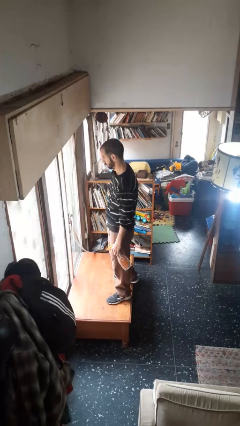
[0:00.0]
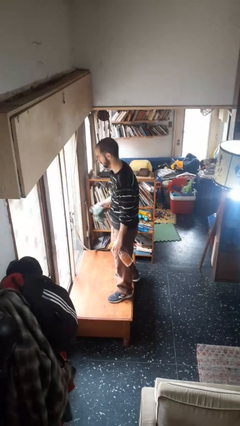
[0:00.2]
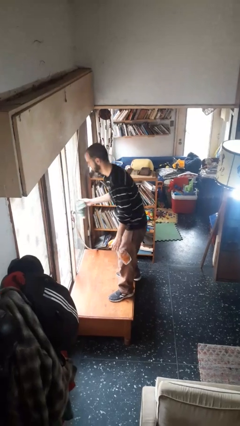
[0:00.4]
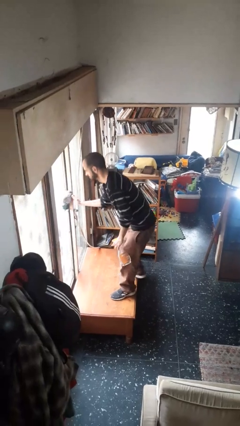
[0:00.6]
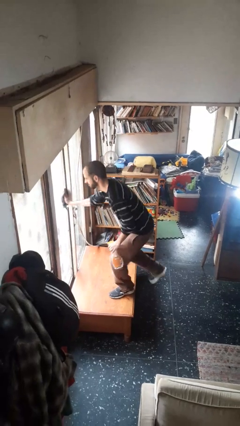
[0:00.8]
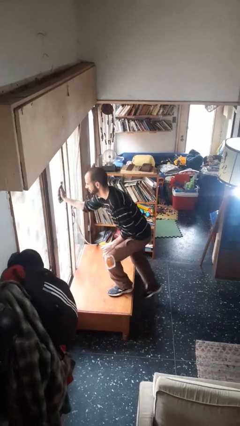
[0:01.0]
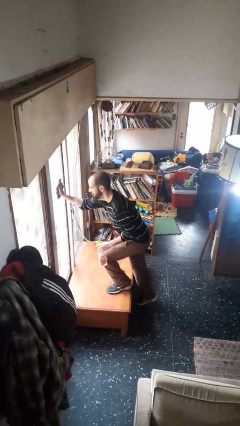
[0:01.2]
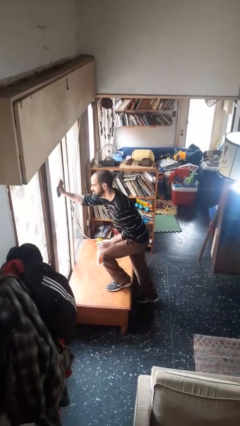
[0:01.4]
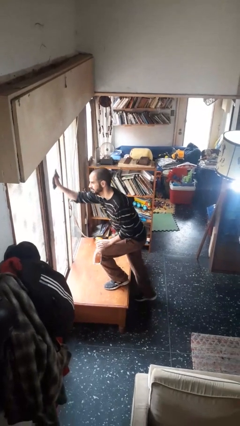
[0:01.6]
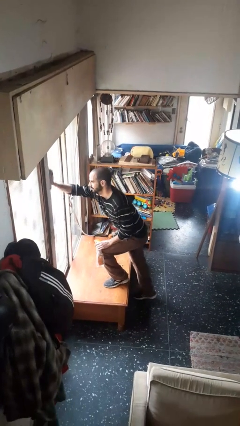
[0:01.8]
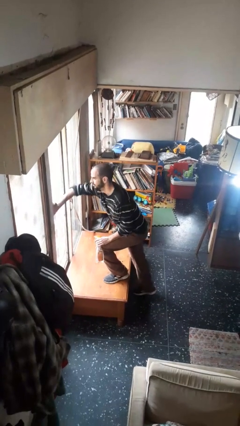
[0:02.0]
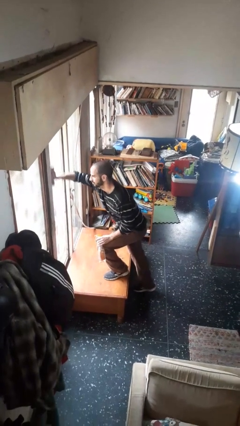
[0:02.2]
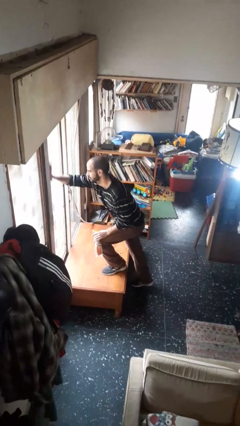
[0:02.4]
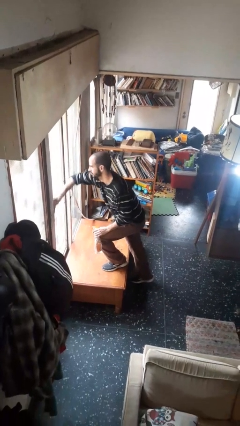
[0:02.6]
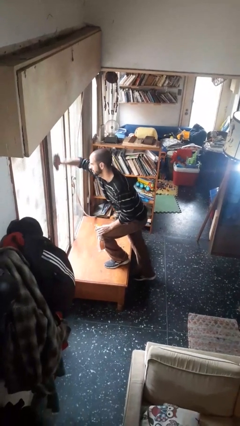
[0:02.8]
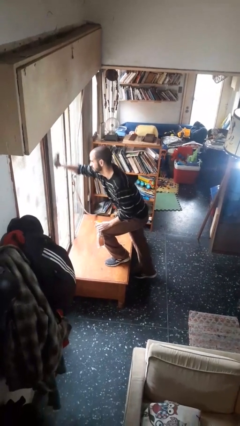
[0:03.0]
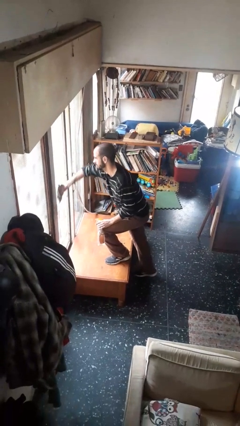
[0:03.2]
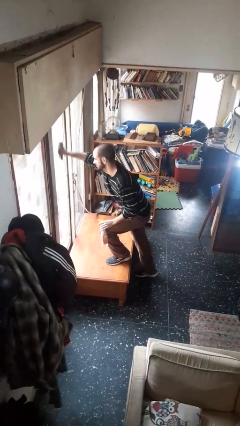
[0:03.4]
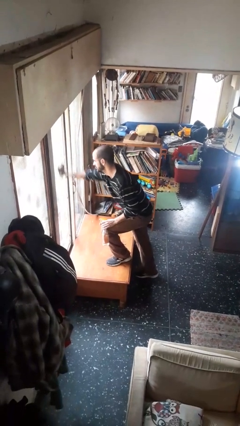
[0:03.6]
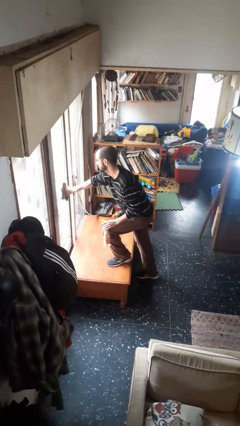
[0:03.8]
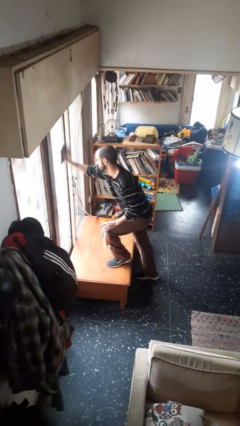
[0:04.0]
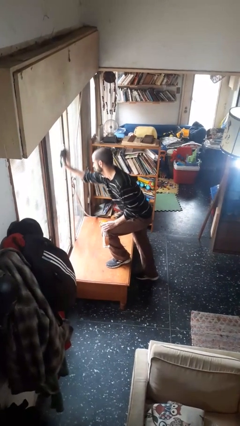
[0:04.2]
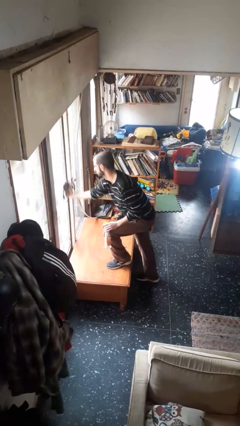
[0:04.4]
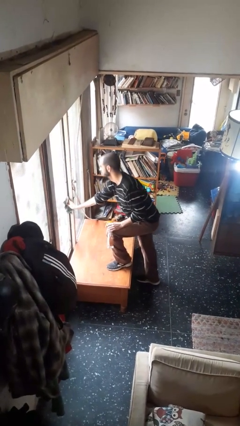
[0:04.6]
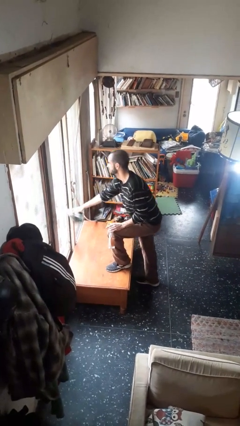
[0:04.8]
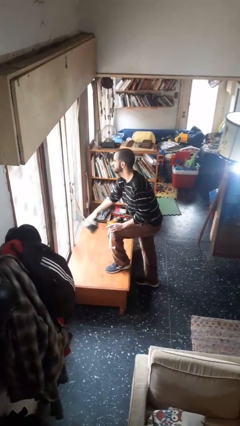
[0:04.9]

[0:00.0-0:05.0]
person washes window

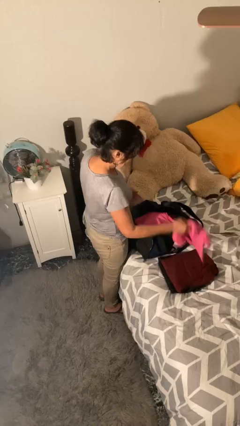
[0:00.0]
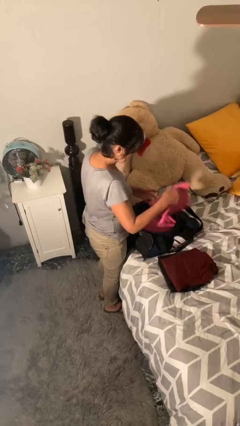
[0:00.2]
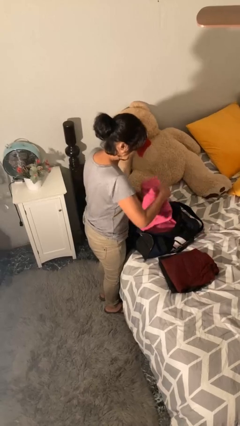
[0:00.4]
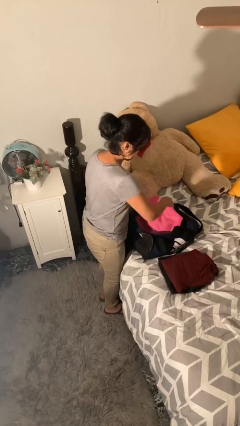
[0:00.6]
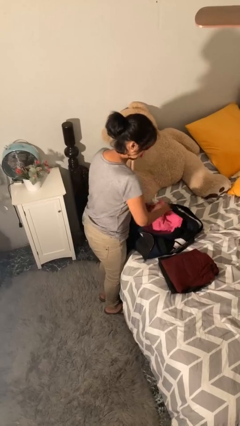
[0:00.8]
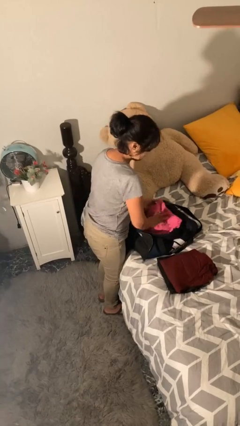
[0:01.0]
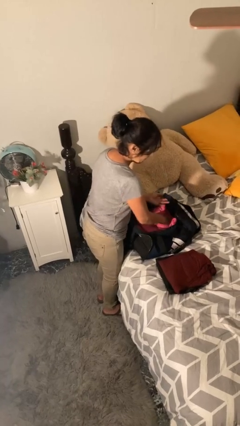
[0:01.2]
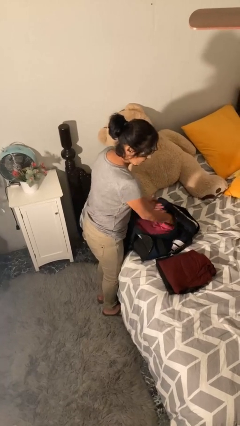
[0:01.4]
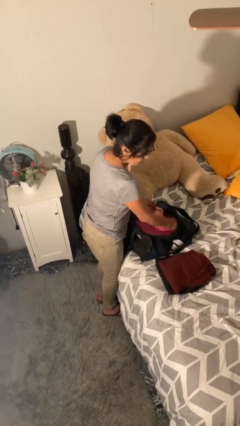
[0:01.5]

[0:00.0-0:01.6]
person loads clothes into suitcase

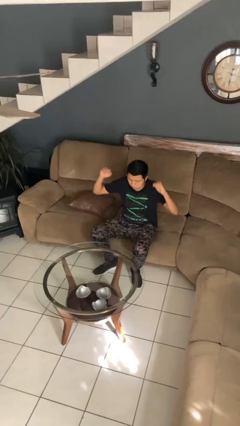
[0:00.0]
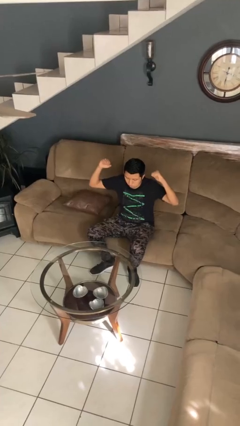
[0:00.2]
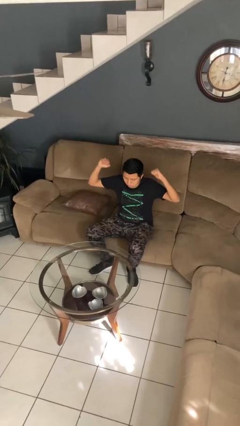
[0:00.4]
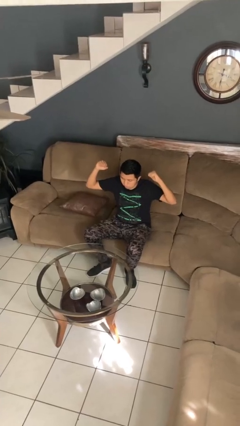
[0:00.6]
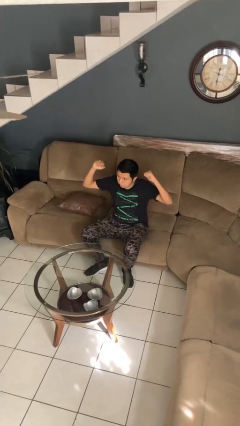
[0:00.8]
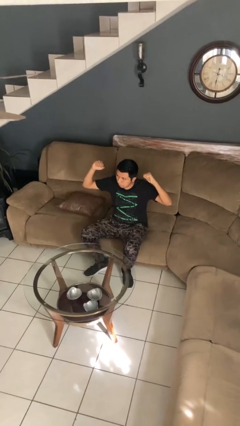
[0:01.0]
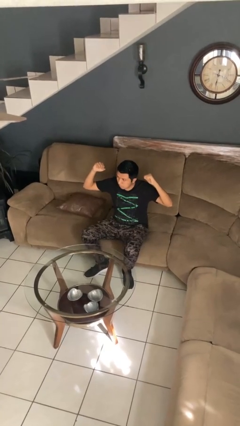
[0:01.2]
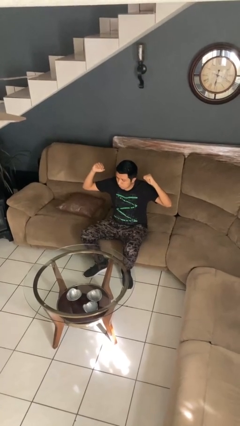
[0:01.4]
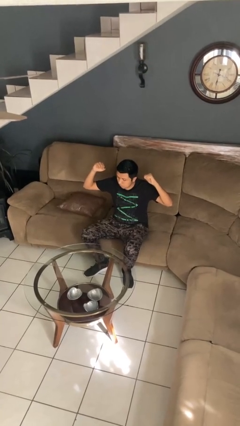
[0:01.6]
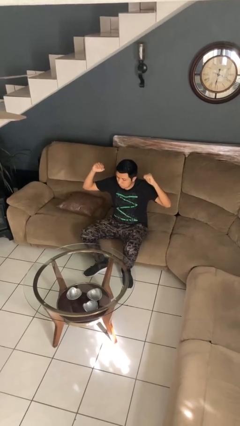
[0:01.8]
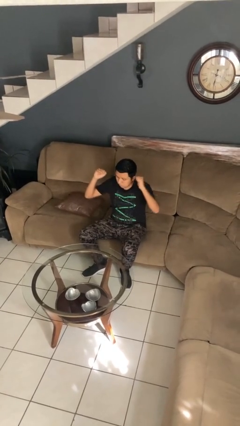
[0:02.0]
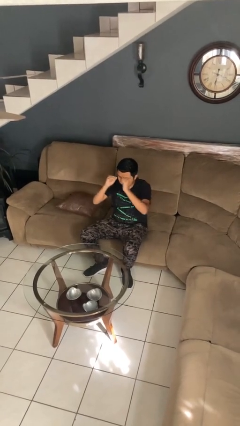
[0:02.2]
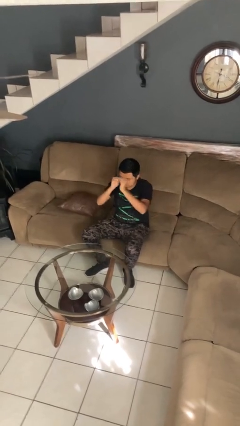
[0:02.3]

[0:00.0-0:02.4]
person gestures zoom in

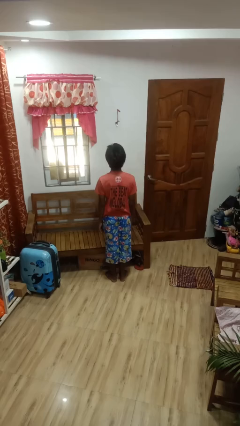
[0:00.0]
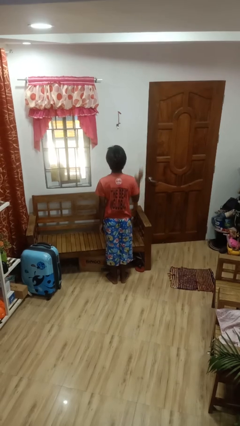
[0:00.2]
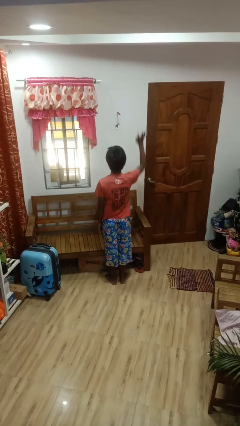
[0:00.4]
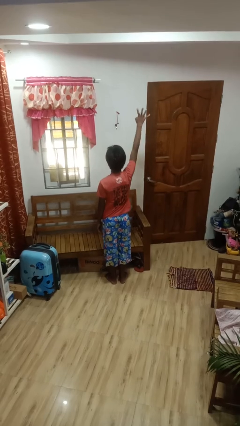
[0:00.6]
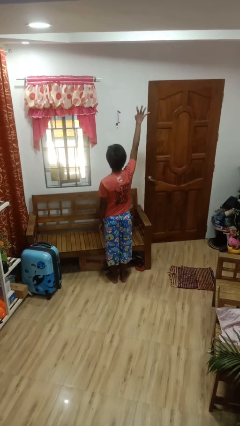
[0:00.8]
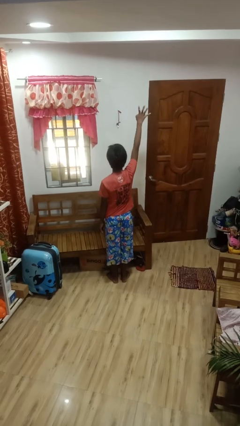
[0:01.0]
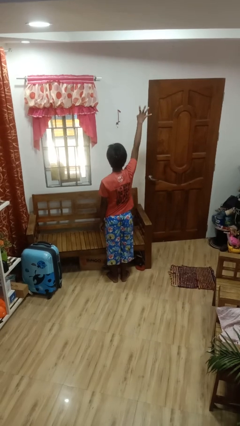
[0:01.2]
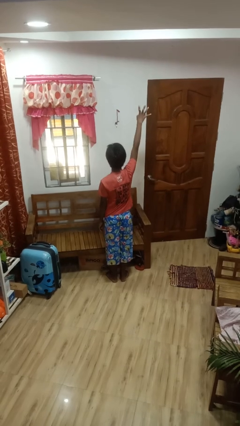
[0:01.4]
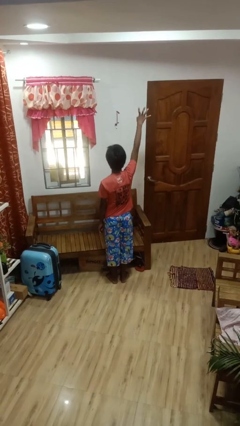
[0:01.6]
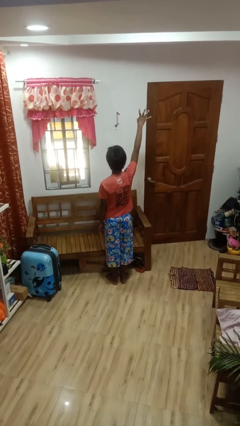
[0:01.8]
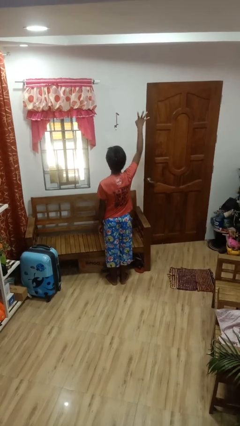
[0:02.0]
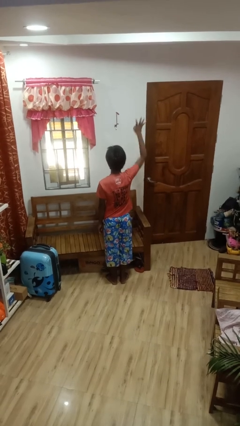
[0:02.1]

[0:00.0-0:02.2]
person gestures number four

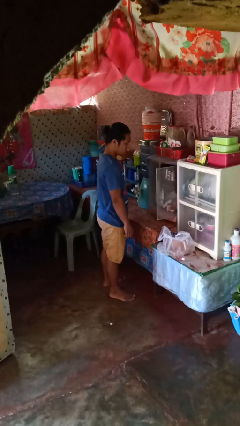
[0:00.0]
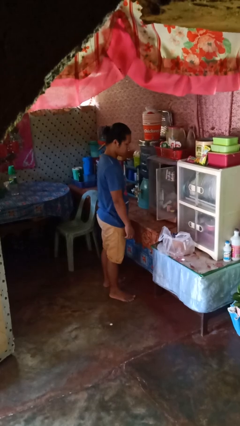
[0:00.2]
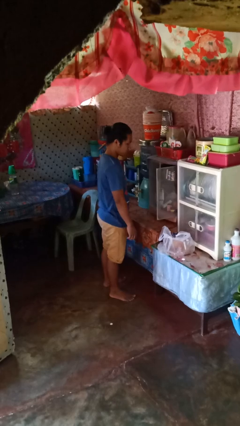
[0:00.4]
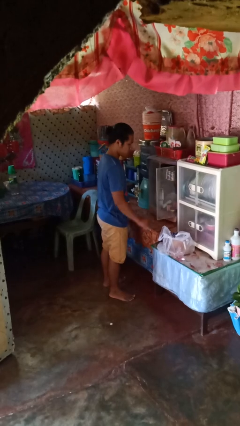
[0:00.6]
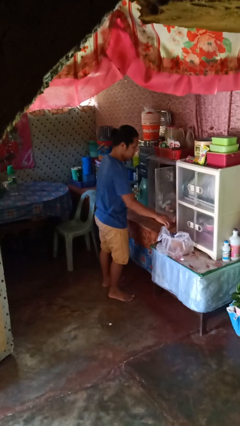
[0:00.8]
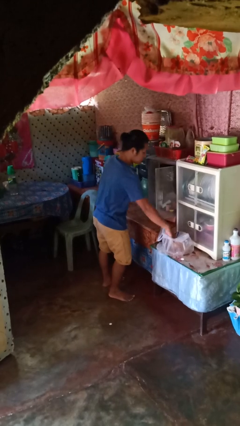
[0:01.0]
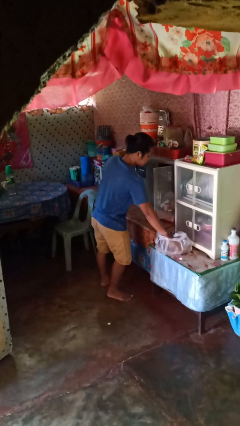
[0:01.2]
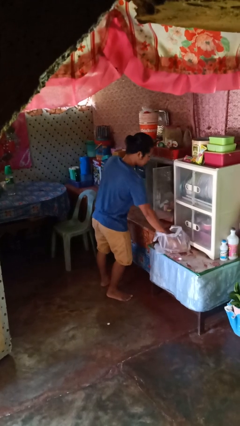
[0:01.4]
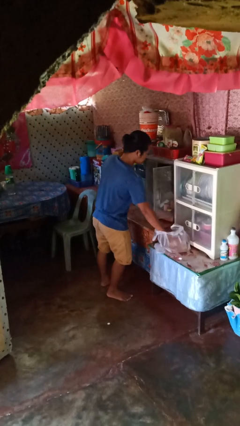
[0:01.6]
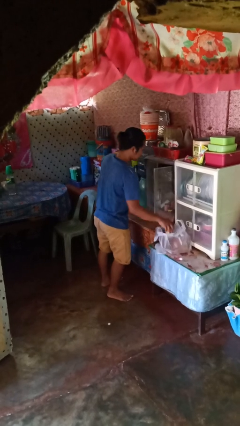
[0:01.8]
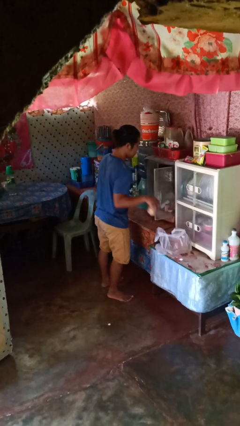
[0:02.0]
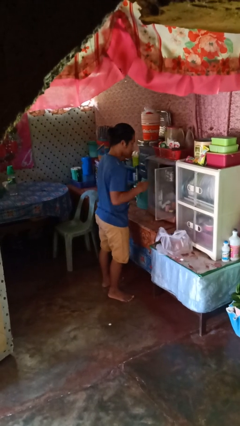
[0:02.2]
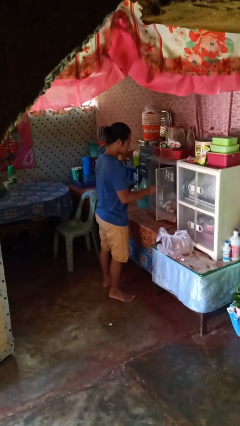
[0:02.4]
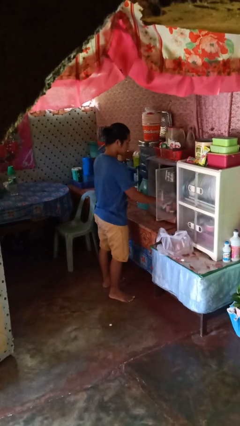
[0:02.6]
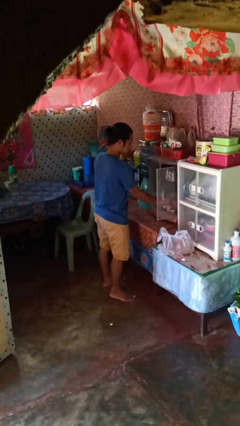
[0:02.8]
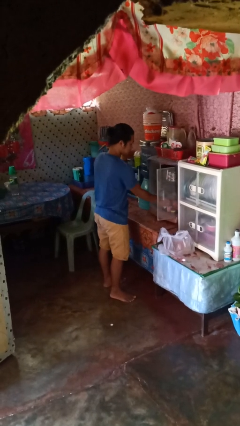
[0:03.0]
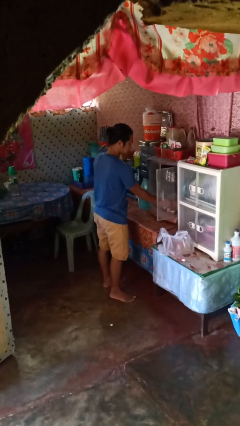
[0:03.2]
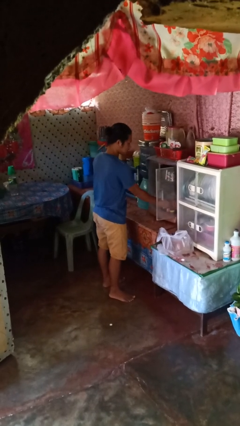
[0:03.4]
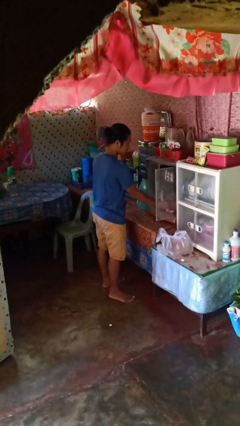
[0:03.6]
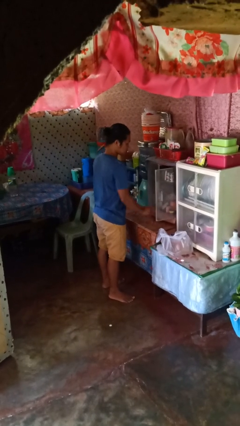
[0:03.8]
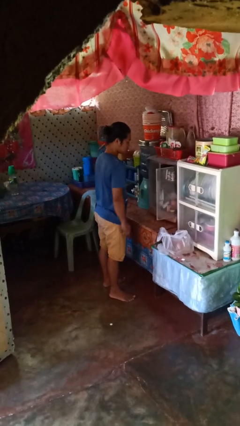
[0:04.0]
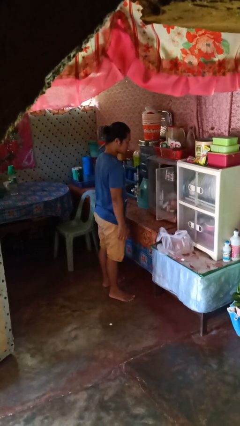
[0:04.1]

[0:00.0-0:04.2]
person loads groceries into cabinet

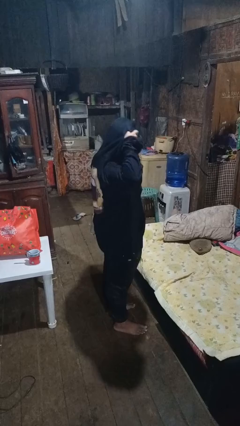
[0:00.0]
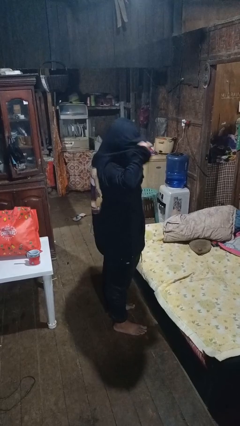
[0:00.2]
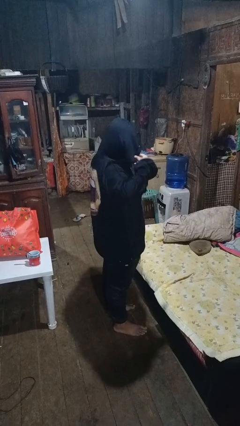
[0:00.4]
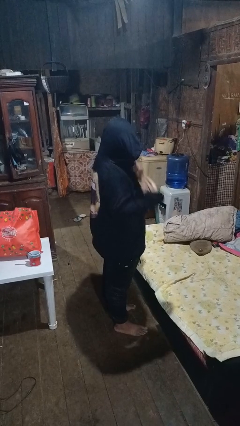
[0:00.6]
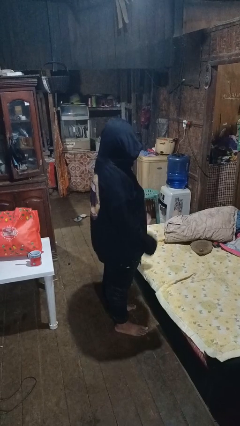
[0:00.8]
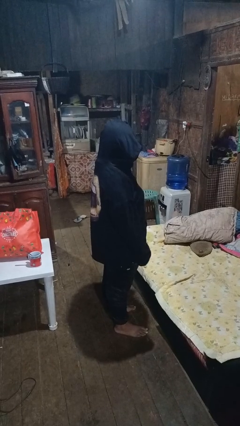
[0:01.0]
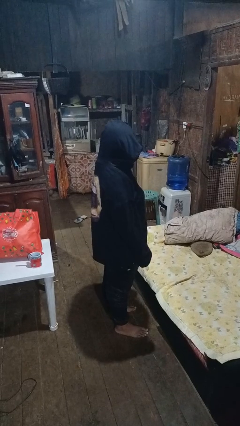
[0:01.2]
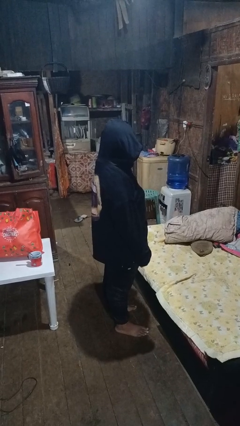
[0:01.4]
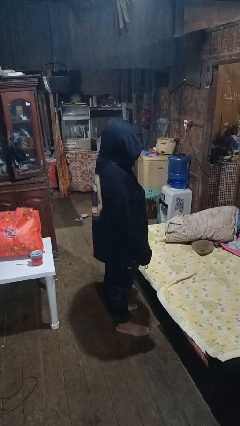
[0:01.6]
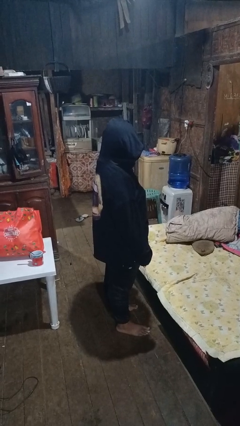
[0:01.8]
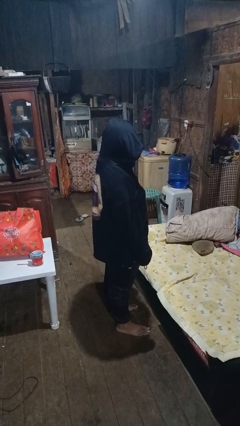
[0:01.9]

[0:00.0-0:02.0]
person puts on hoodie
